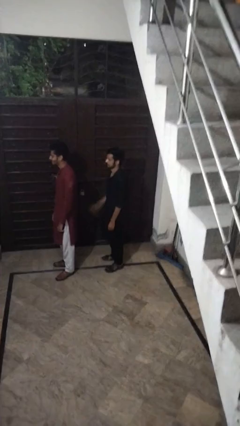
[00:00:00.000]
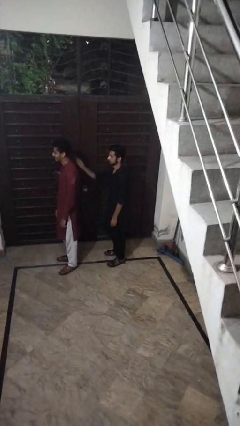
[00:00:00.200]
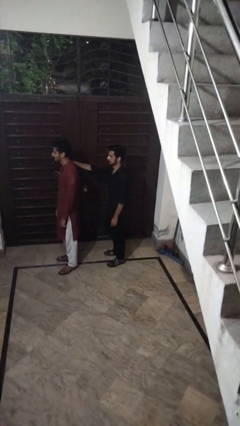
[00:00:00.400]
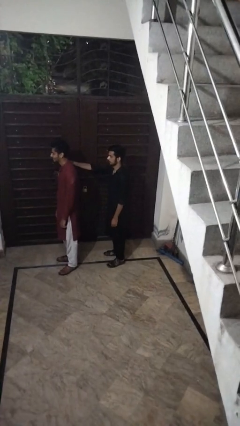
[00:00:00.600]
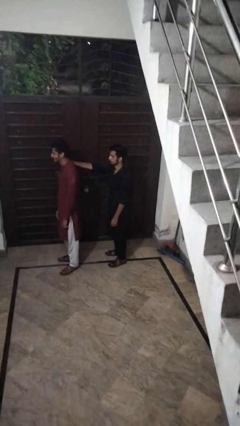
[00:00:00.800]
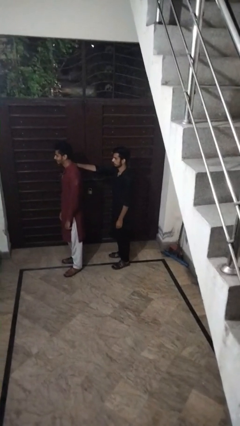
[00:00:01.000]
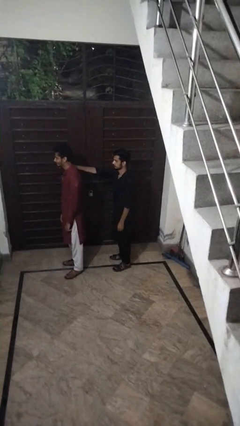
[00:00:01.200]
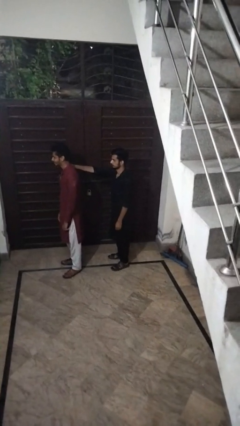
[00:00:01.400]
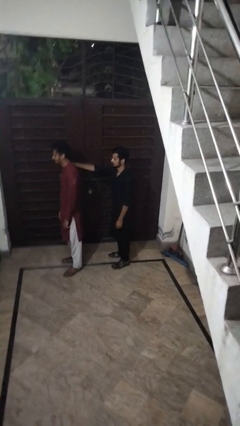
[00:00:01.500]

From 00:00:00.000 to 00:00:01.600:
person grabs person by shoulder

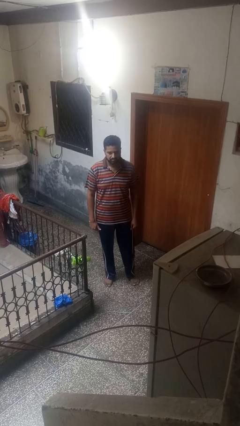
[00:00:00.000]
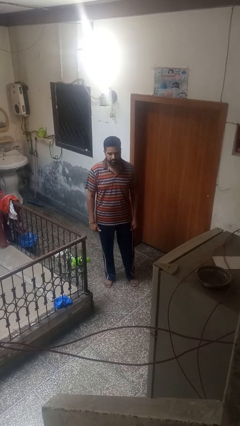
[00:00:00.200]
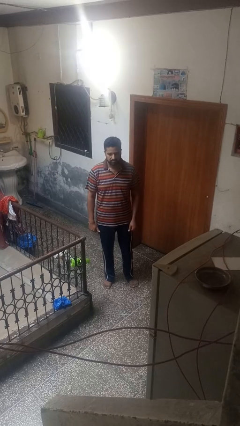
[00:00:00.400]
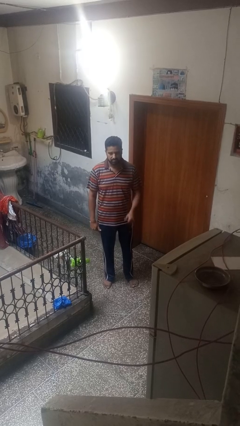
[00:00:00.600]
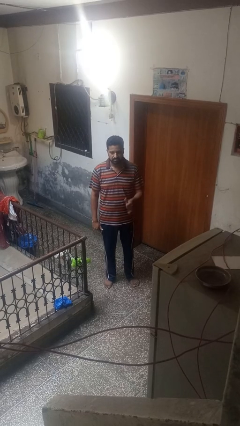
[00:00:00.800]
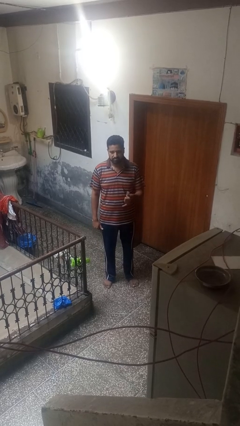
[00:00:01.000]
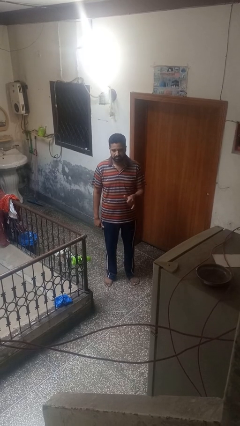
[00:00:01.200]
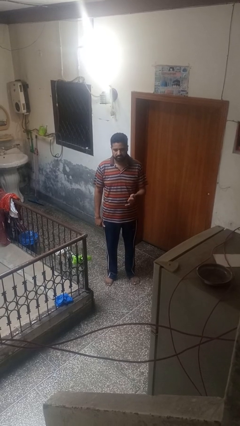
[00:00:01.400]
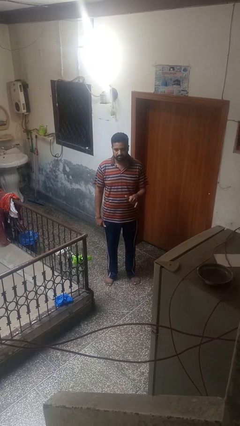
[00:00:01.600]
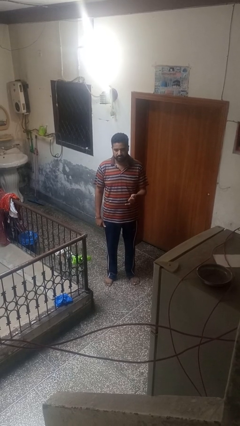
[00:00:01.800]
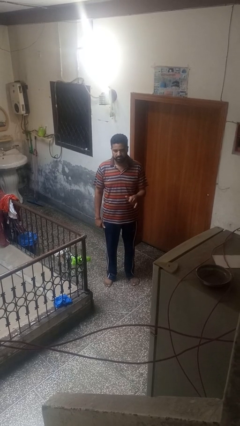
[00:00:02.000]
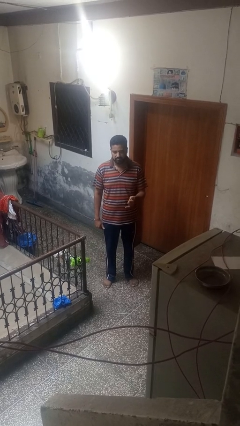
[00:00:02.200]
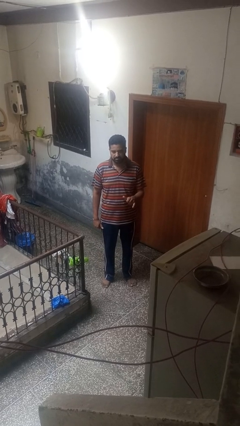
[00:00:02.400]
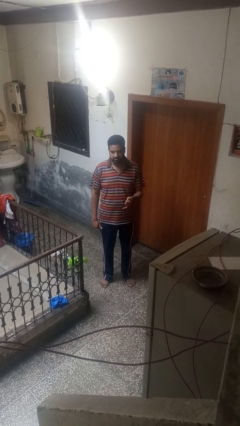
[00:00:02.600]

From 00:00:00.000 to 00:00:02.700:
person gestures hang loose

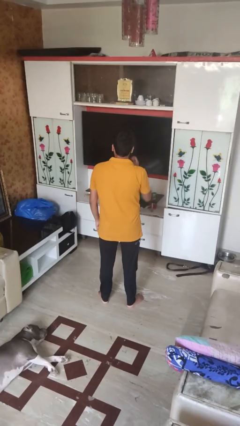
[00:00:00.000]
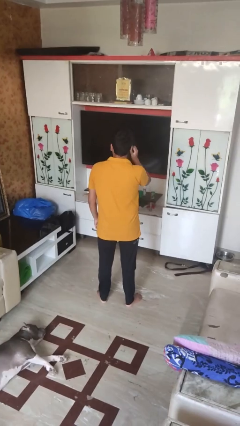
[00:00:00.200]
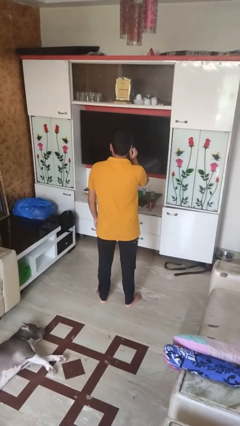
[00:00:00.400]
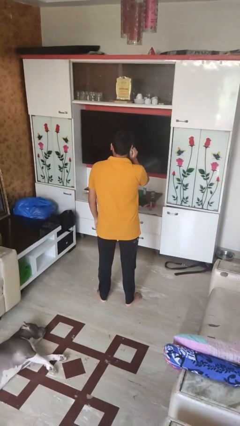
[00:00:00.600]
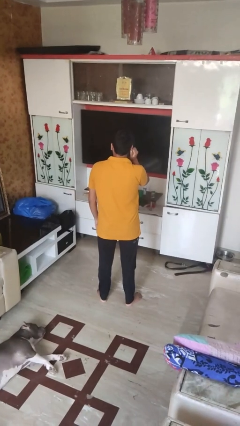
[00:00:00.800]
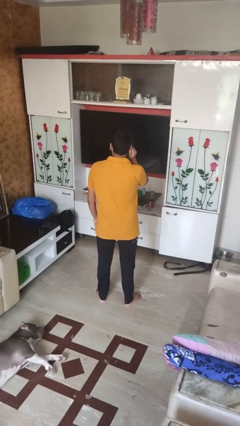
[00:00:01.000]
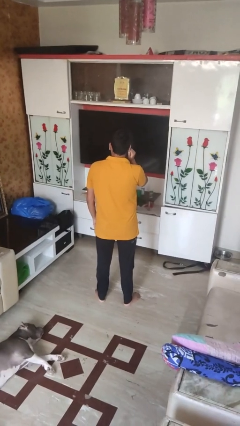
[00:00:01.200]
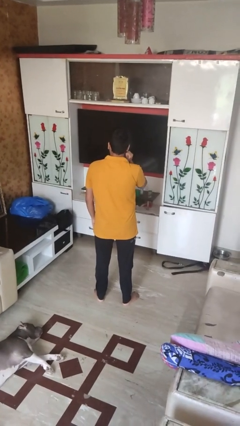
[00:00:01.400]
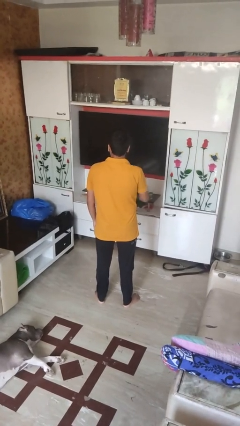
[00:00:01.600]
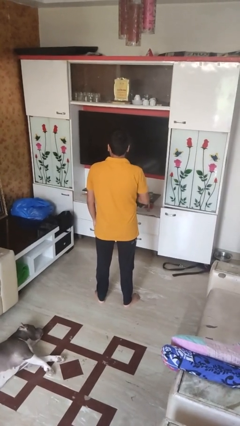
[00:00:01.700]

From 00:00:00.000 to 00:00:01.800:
person touches earlobe

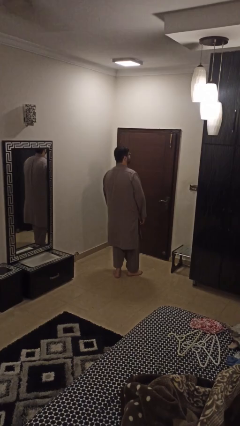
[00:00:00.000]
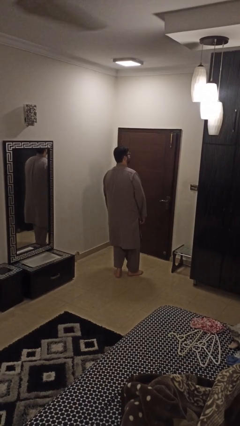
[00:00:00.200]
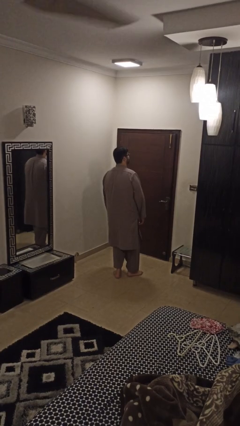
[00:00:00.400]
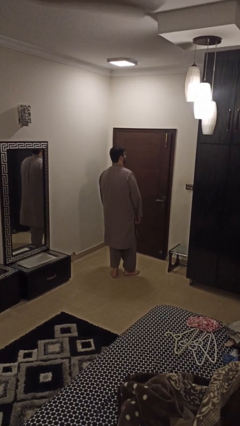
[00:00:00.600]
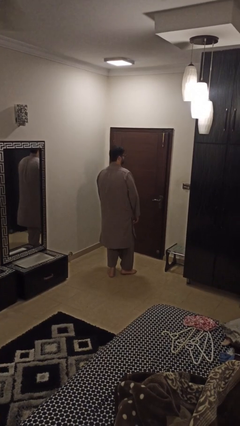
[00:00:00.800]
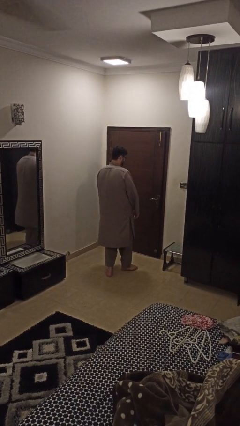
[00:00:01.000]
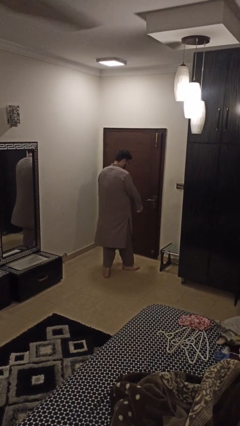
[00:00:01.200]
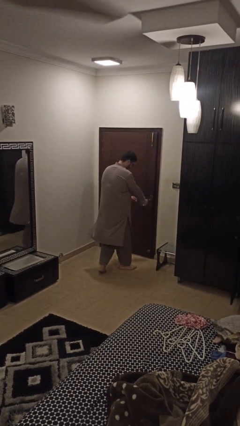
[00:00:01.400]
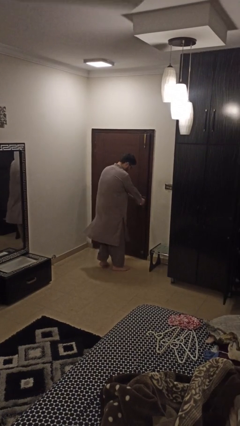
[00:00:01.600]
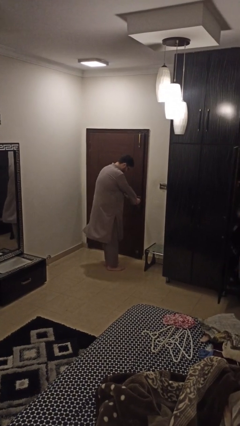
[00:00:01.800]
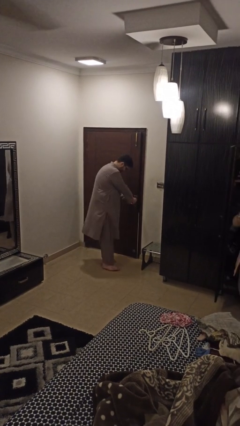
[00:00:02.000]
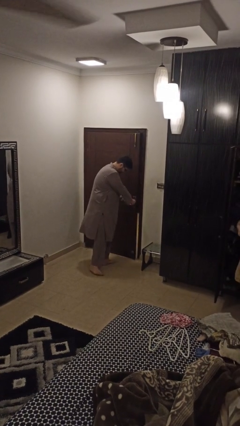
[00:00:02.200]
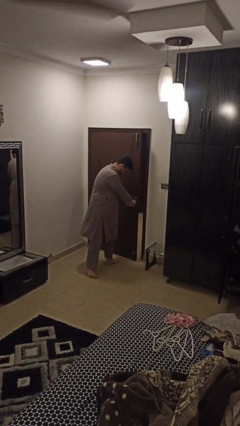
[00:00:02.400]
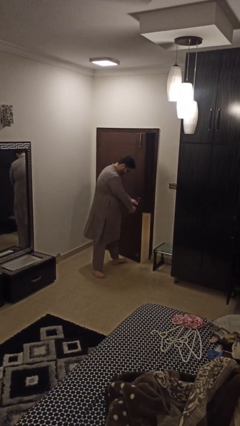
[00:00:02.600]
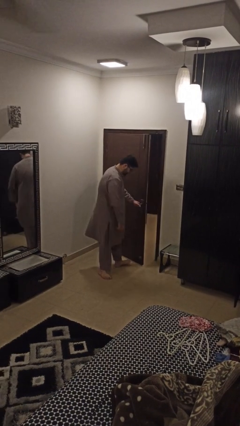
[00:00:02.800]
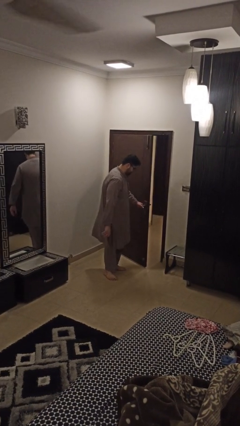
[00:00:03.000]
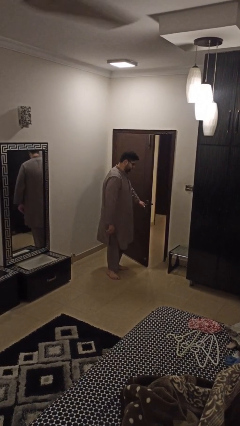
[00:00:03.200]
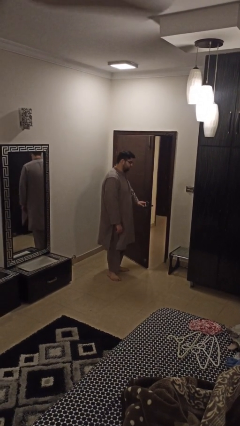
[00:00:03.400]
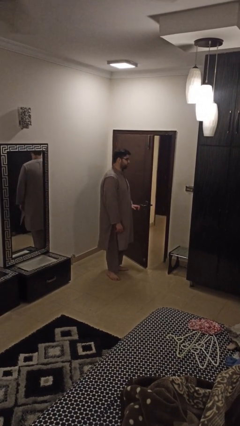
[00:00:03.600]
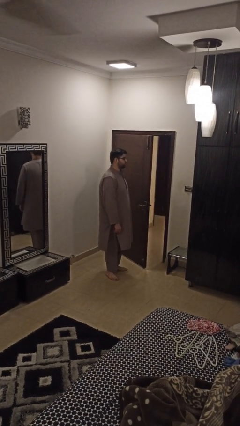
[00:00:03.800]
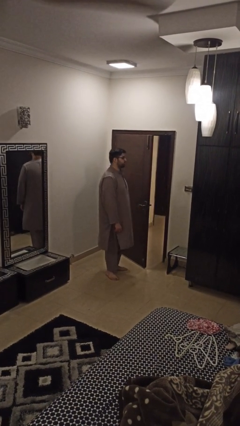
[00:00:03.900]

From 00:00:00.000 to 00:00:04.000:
person opens facility door

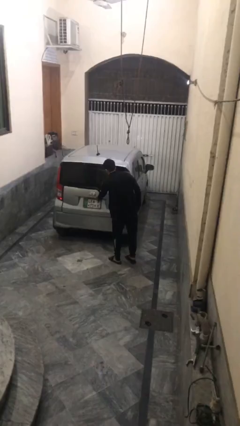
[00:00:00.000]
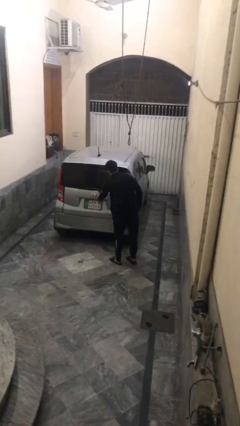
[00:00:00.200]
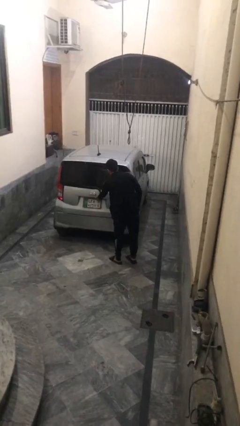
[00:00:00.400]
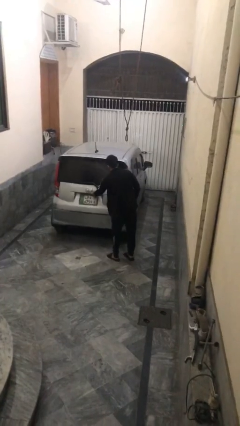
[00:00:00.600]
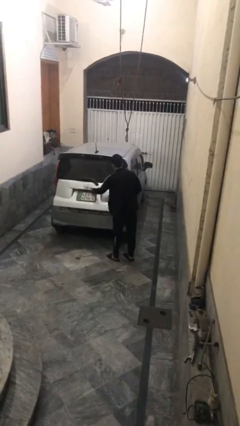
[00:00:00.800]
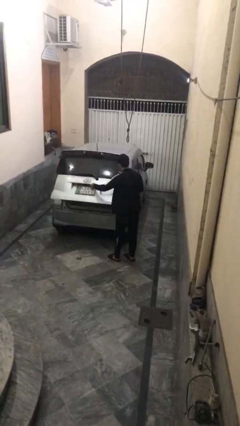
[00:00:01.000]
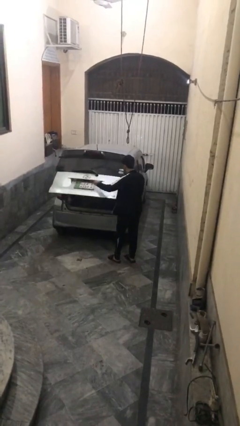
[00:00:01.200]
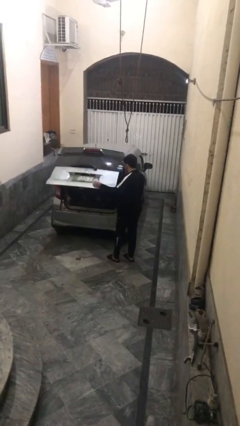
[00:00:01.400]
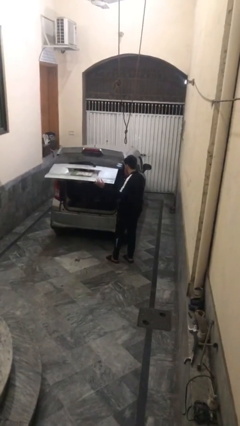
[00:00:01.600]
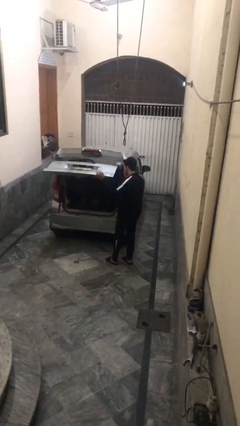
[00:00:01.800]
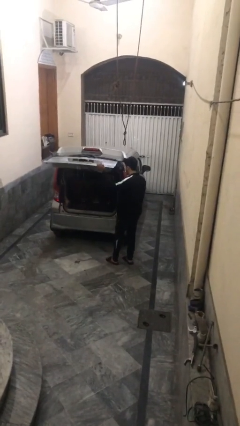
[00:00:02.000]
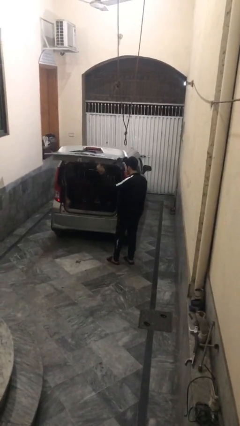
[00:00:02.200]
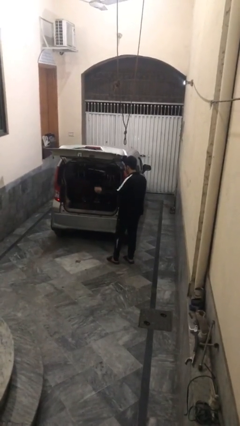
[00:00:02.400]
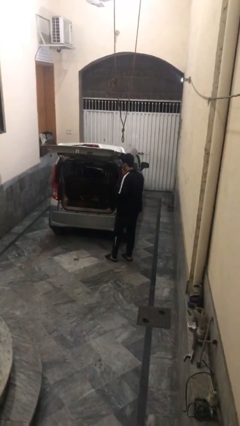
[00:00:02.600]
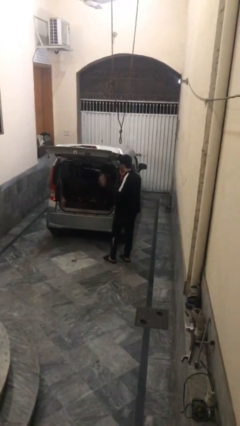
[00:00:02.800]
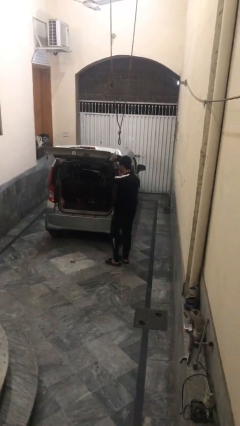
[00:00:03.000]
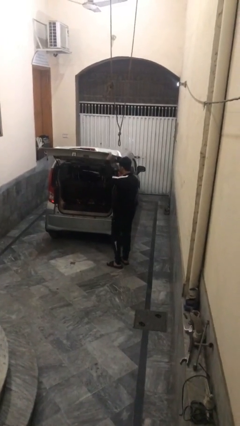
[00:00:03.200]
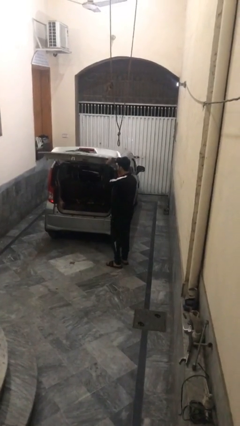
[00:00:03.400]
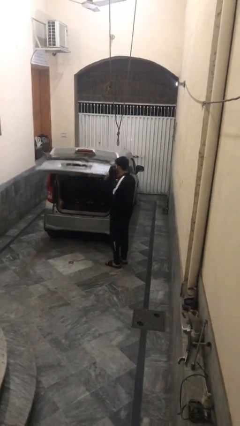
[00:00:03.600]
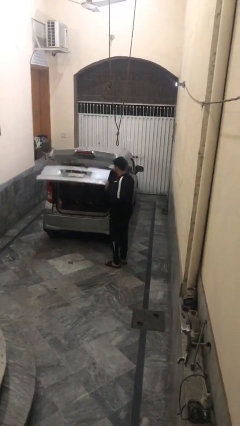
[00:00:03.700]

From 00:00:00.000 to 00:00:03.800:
person opens car trunk

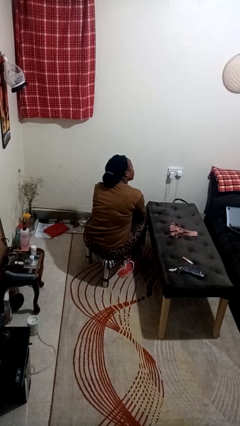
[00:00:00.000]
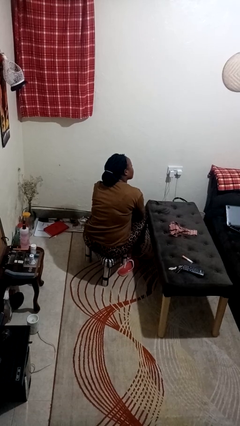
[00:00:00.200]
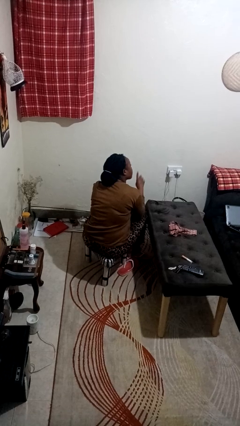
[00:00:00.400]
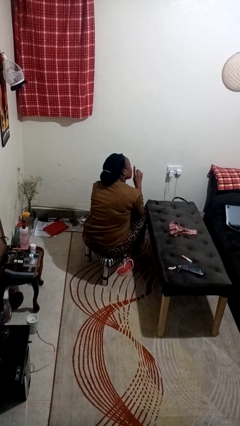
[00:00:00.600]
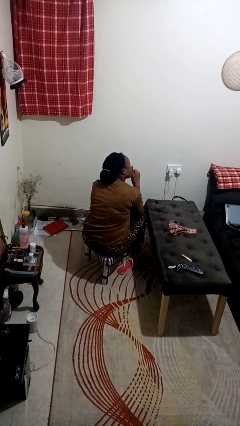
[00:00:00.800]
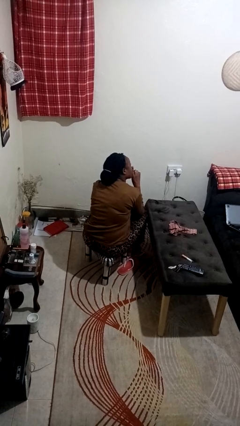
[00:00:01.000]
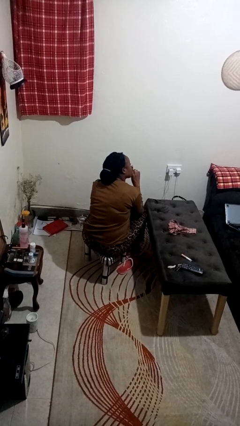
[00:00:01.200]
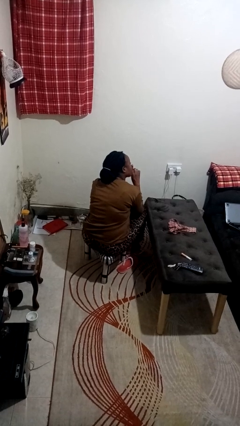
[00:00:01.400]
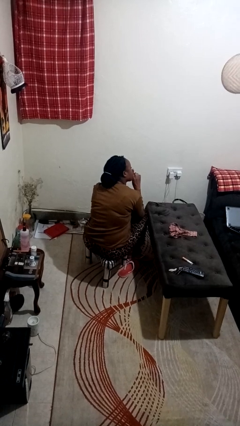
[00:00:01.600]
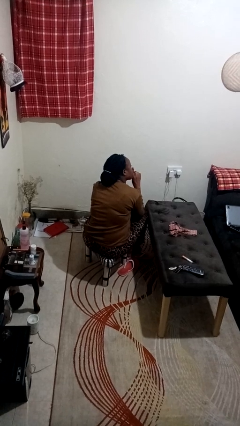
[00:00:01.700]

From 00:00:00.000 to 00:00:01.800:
person gestures be quiet

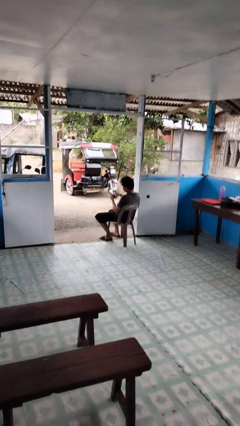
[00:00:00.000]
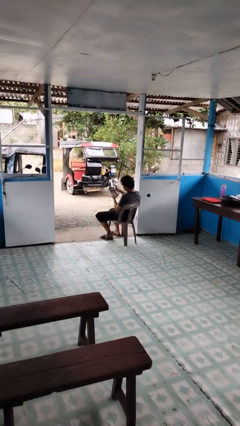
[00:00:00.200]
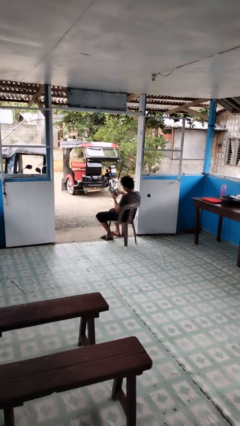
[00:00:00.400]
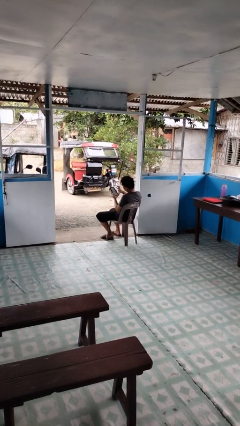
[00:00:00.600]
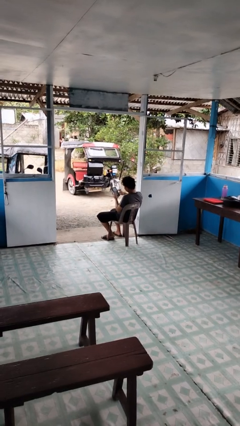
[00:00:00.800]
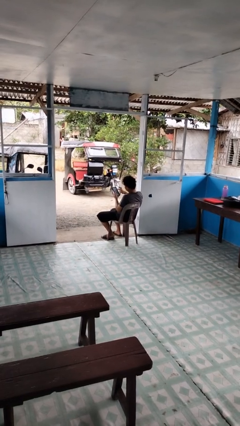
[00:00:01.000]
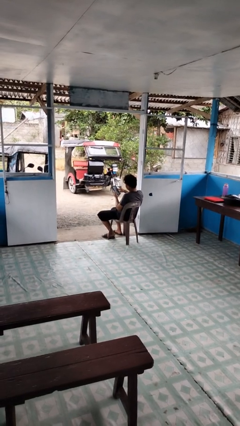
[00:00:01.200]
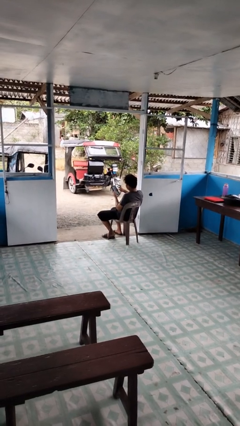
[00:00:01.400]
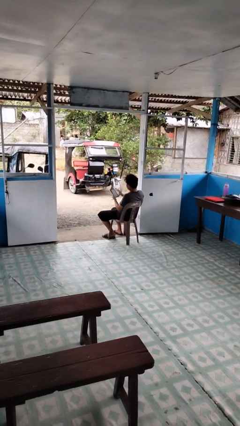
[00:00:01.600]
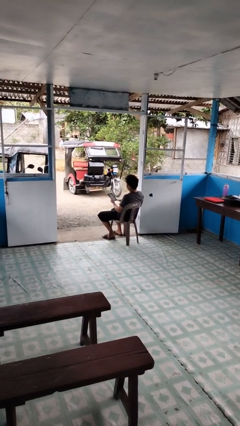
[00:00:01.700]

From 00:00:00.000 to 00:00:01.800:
person interacts with tablet
